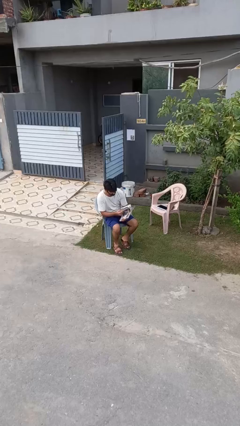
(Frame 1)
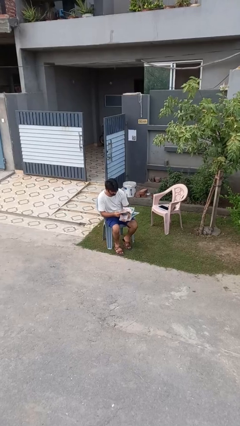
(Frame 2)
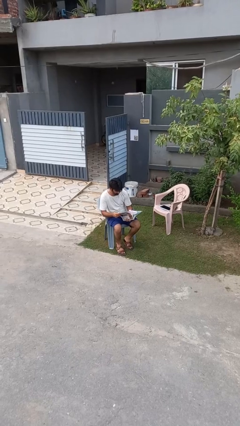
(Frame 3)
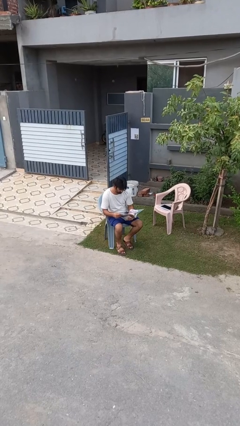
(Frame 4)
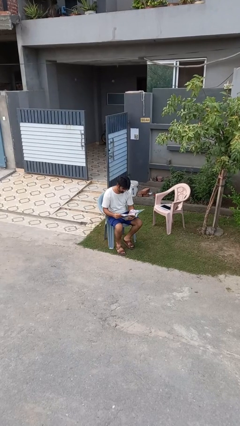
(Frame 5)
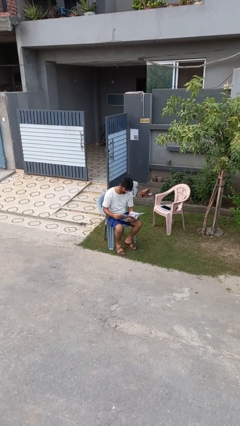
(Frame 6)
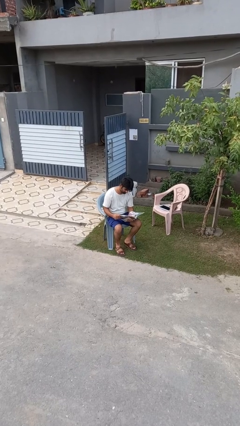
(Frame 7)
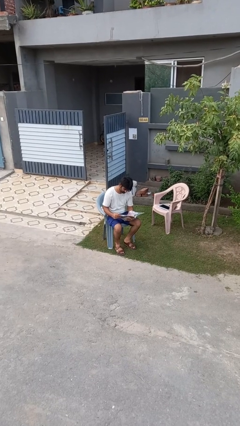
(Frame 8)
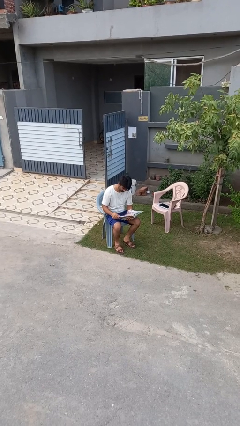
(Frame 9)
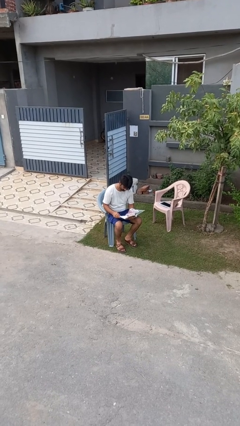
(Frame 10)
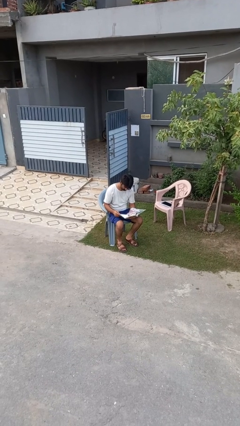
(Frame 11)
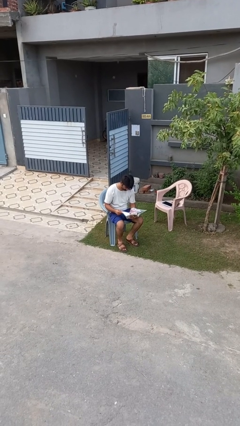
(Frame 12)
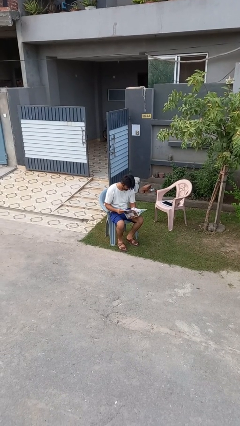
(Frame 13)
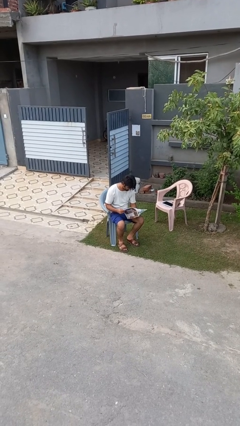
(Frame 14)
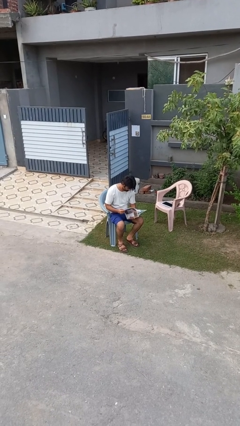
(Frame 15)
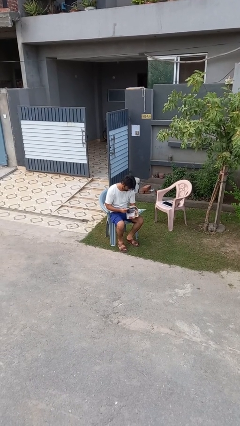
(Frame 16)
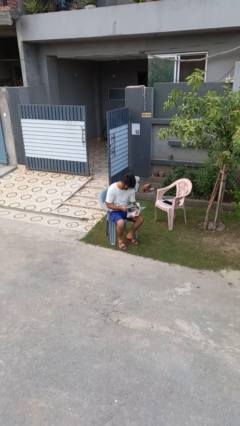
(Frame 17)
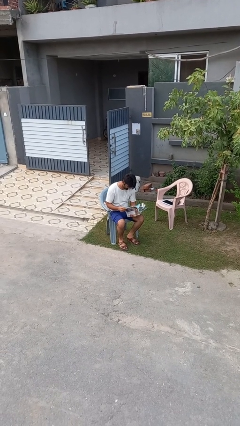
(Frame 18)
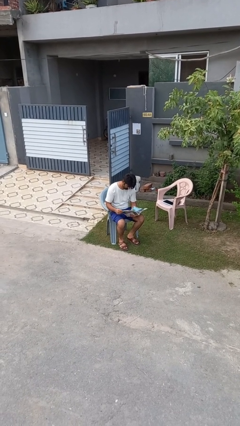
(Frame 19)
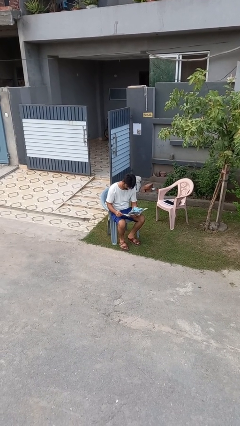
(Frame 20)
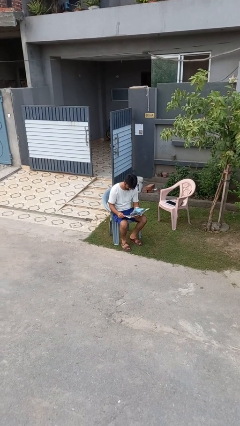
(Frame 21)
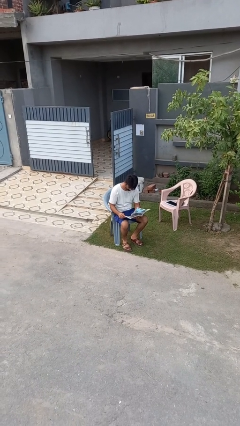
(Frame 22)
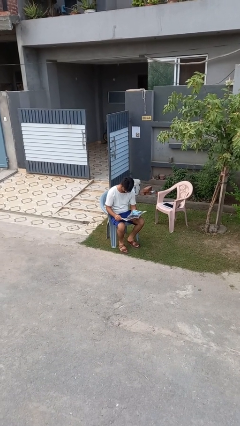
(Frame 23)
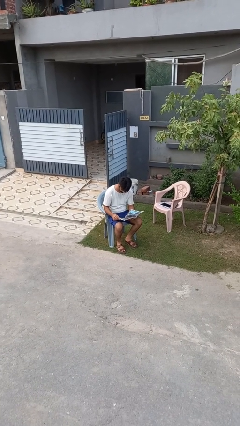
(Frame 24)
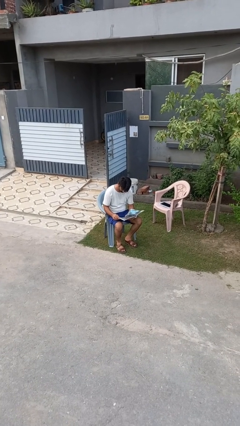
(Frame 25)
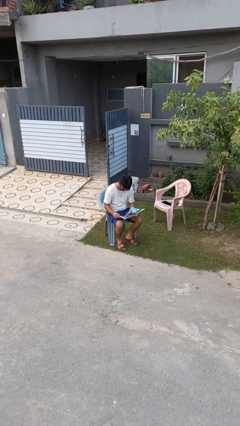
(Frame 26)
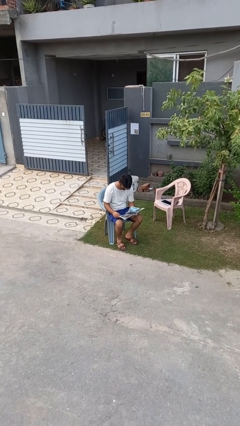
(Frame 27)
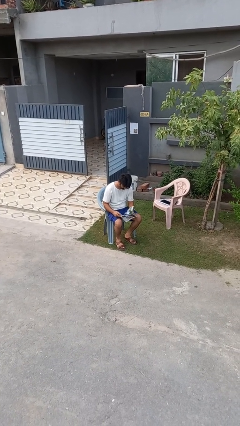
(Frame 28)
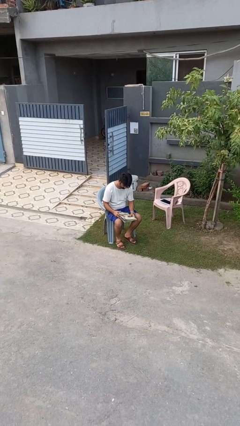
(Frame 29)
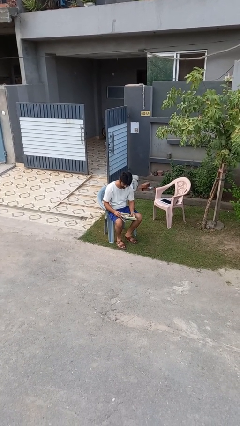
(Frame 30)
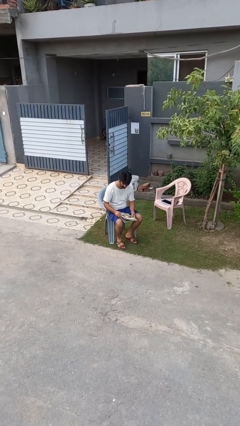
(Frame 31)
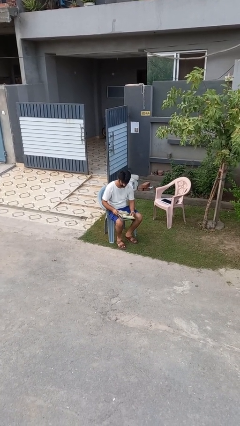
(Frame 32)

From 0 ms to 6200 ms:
person reads magazine

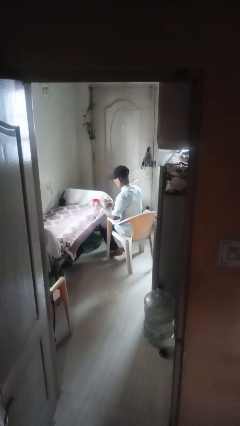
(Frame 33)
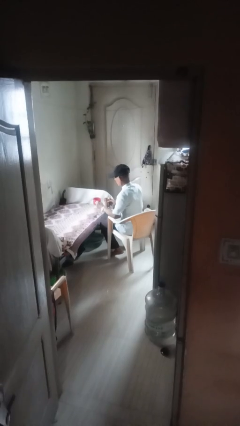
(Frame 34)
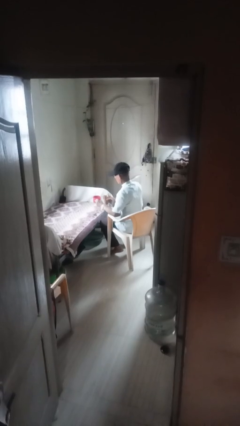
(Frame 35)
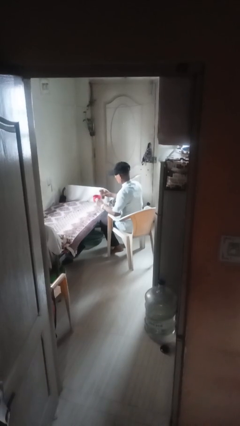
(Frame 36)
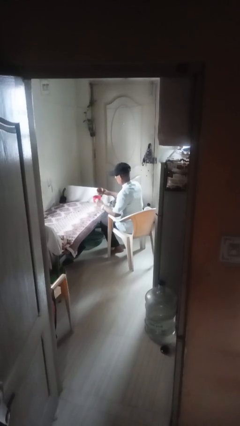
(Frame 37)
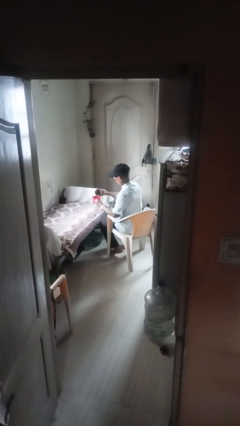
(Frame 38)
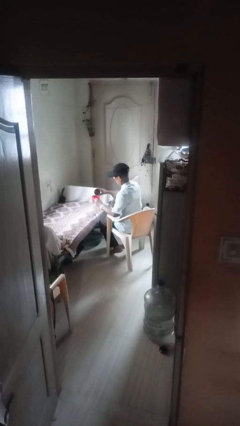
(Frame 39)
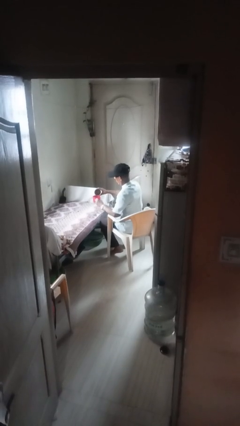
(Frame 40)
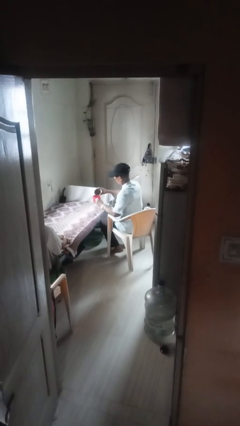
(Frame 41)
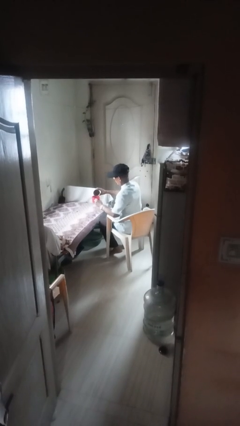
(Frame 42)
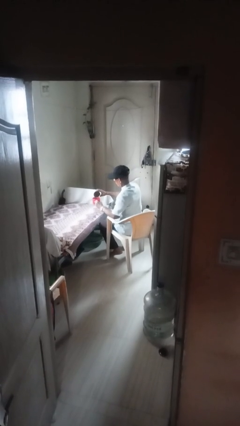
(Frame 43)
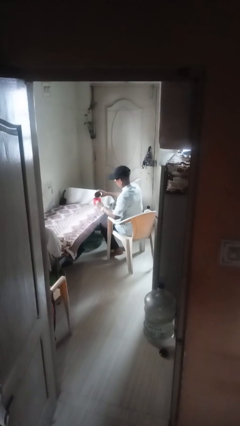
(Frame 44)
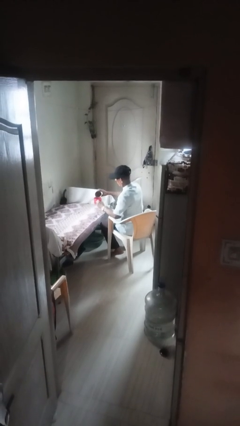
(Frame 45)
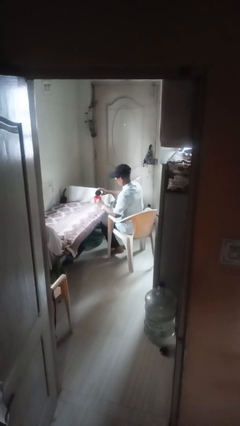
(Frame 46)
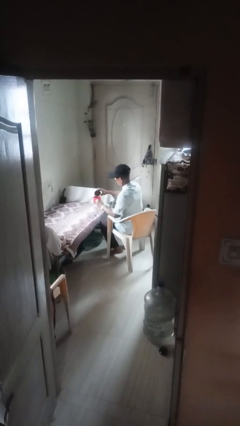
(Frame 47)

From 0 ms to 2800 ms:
person pours coffee into mug

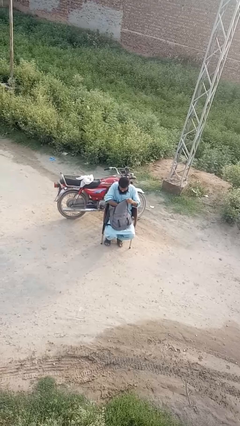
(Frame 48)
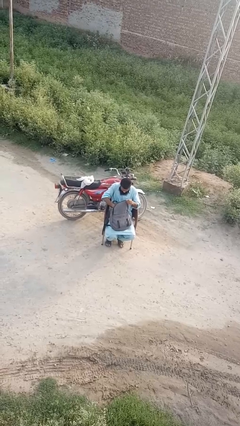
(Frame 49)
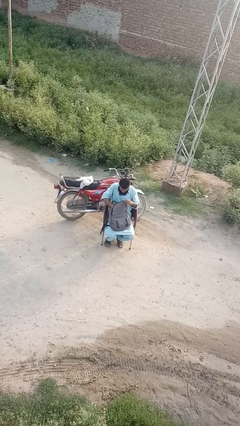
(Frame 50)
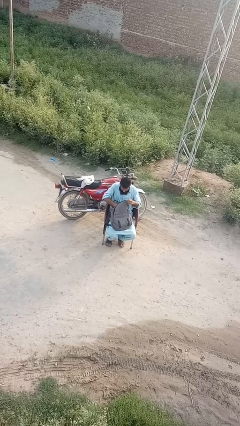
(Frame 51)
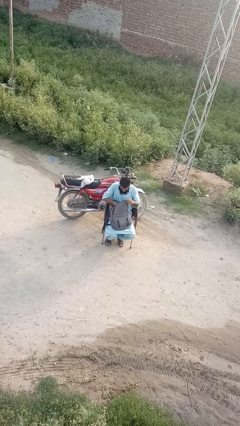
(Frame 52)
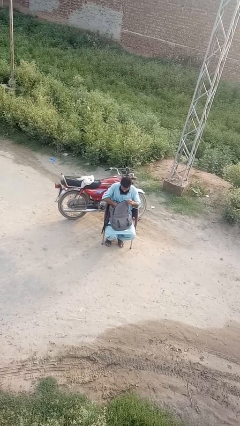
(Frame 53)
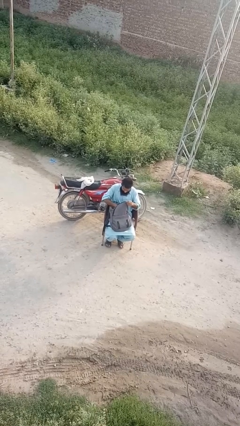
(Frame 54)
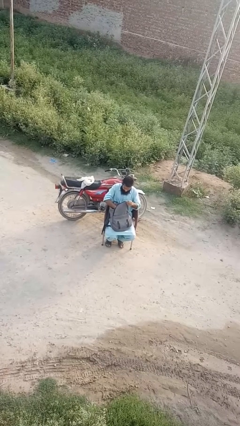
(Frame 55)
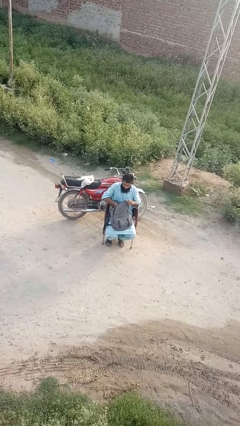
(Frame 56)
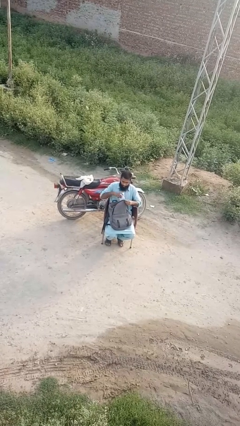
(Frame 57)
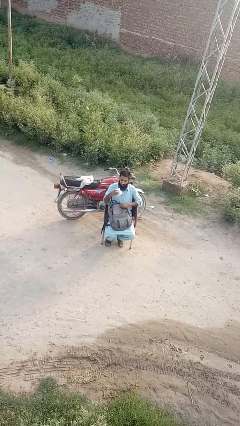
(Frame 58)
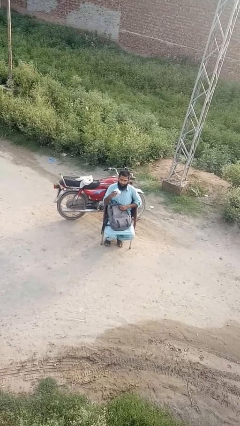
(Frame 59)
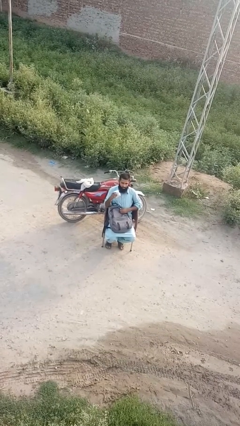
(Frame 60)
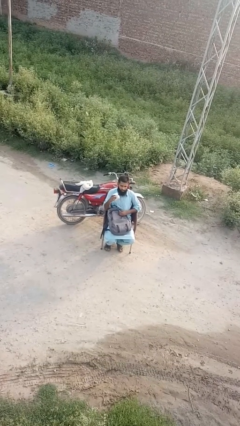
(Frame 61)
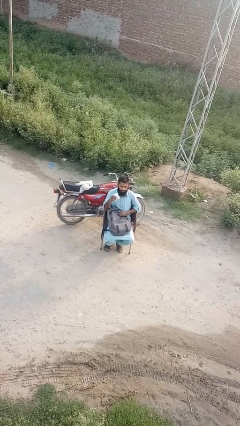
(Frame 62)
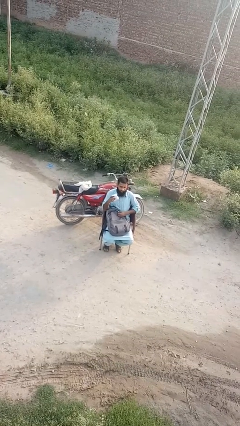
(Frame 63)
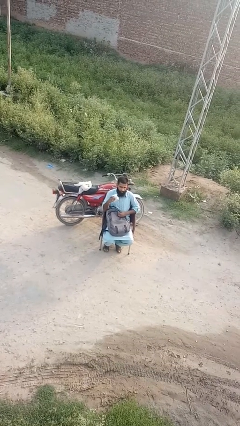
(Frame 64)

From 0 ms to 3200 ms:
person takes object from backpack

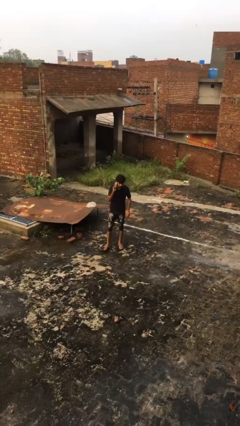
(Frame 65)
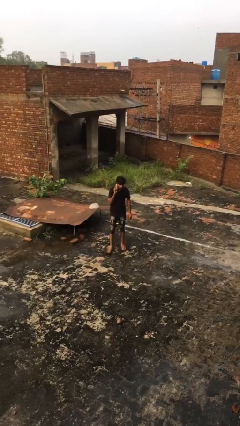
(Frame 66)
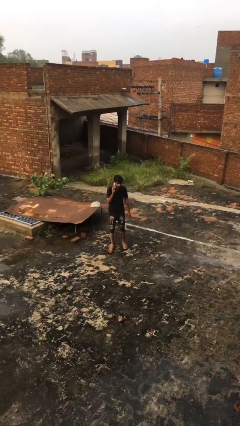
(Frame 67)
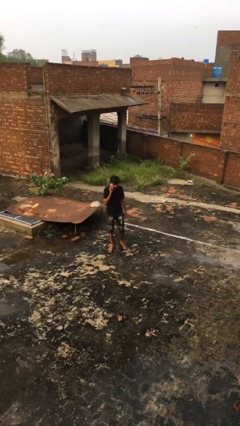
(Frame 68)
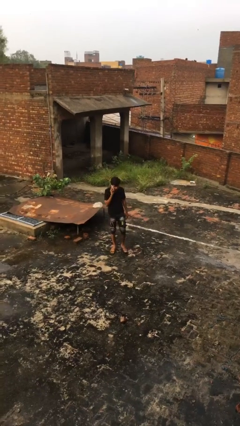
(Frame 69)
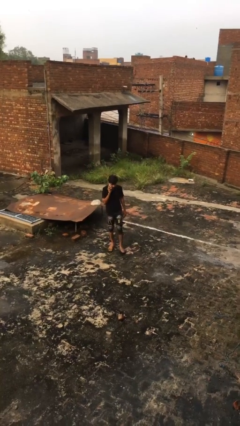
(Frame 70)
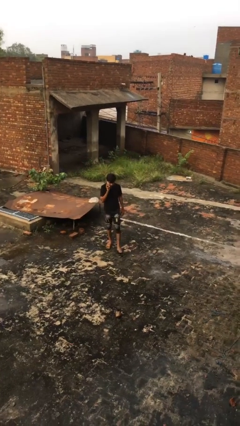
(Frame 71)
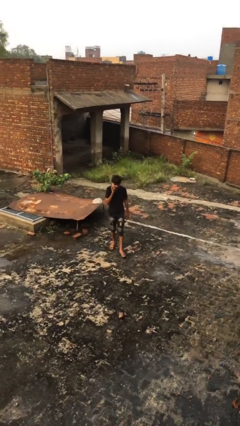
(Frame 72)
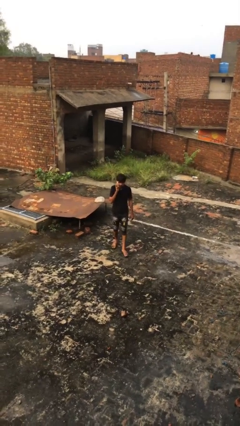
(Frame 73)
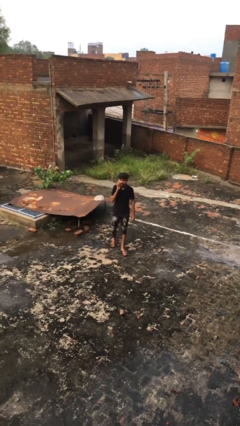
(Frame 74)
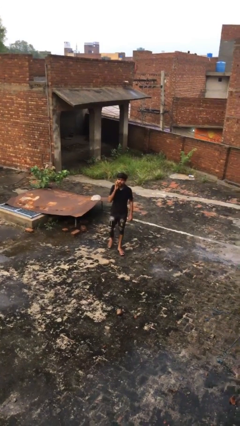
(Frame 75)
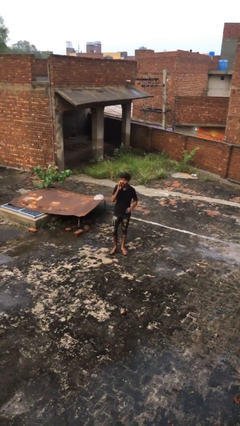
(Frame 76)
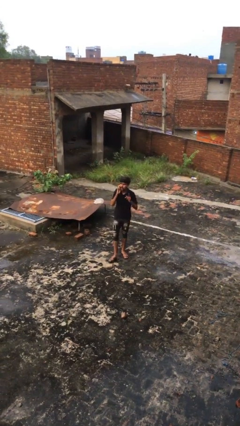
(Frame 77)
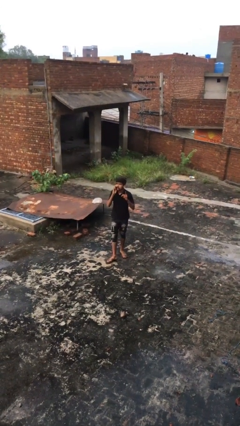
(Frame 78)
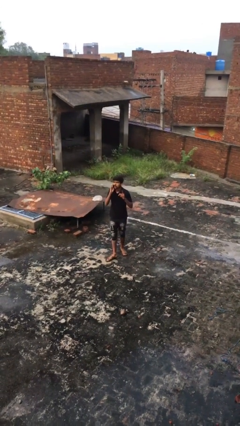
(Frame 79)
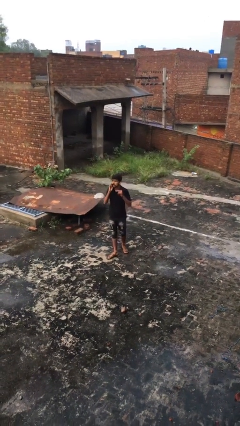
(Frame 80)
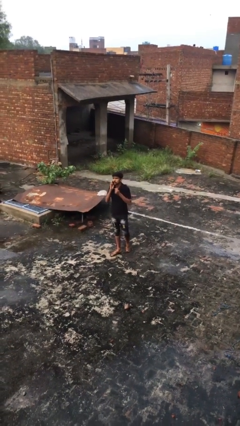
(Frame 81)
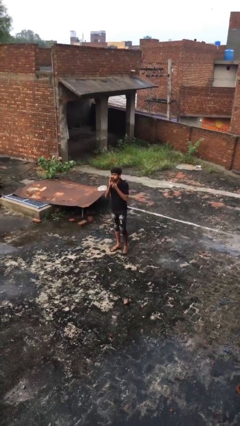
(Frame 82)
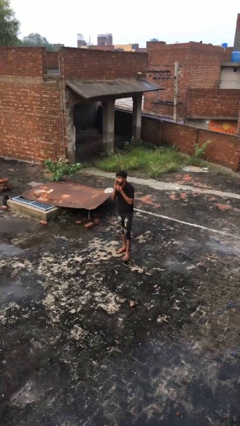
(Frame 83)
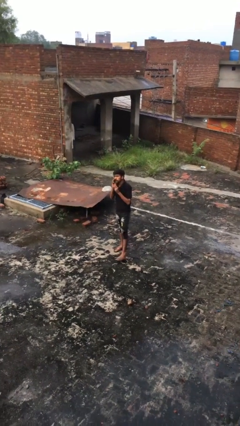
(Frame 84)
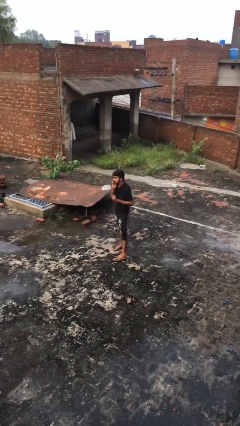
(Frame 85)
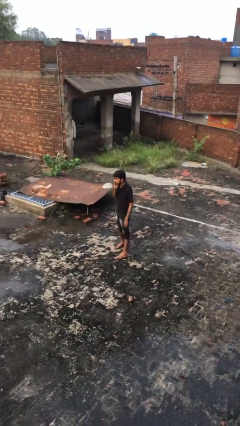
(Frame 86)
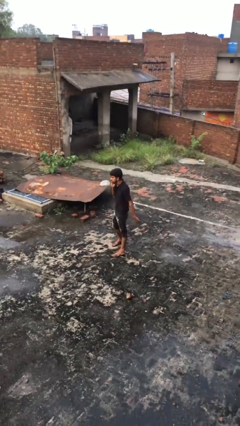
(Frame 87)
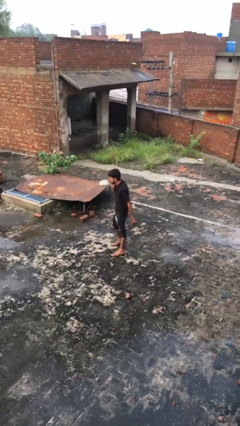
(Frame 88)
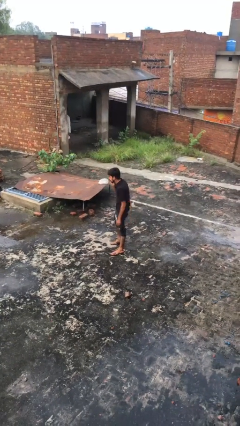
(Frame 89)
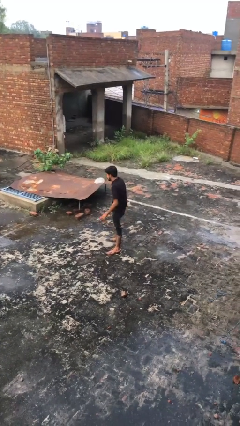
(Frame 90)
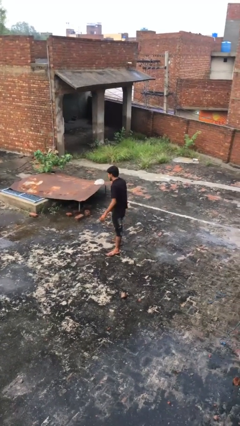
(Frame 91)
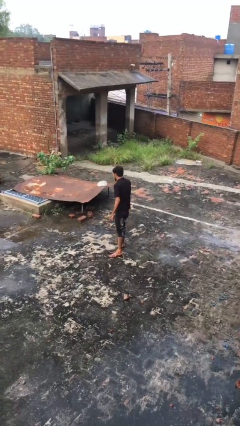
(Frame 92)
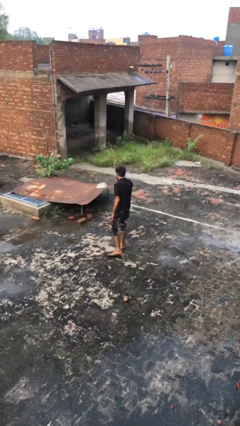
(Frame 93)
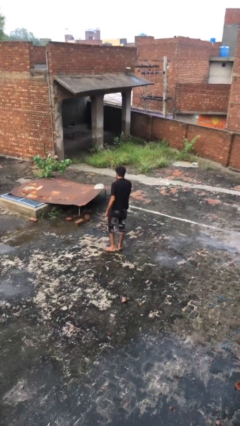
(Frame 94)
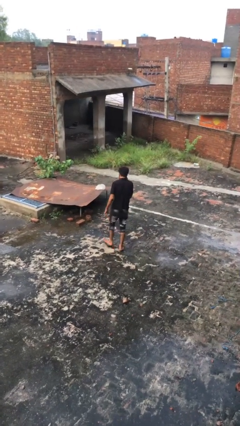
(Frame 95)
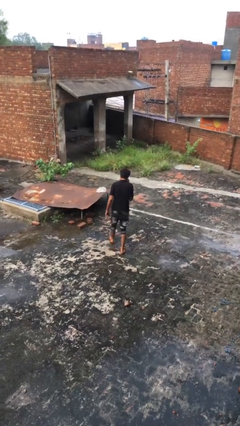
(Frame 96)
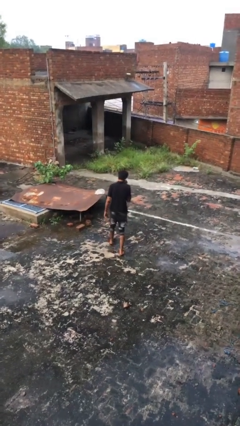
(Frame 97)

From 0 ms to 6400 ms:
person talks on phone
